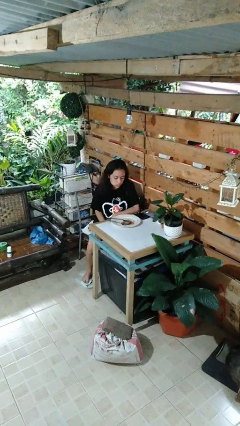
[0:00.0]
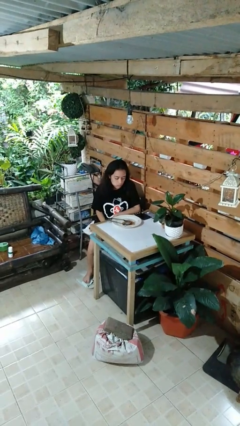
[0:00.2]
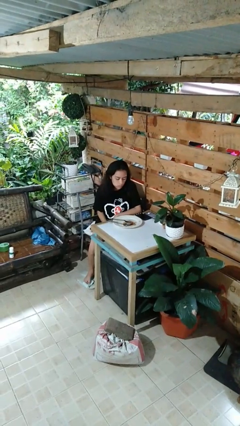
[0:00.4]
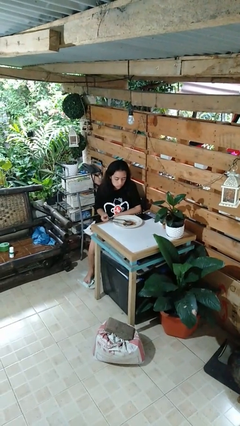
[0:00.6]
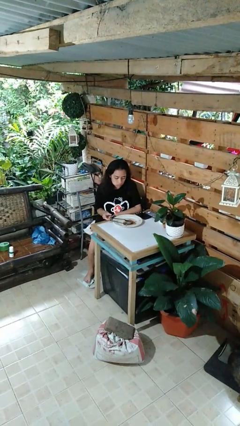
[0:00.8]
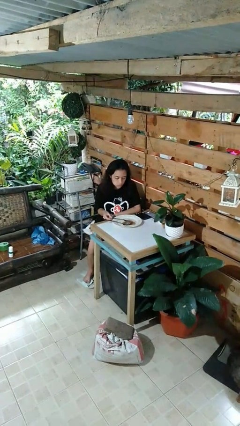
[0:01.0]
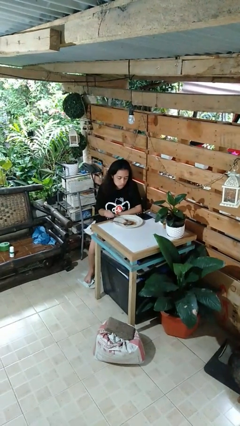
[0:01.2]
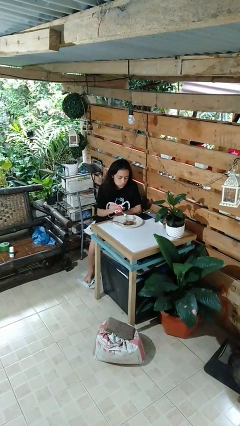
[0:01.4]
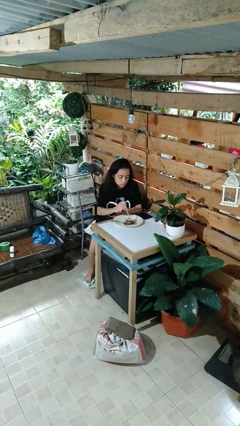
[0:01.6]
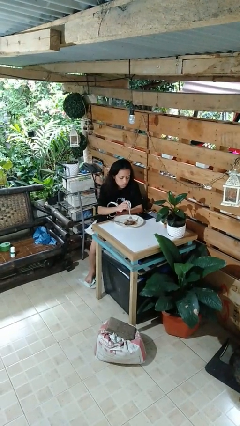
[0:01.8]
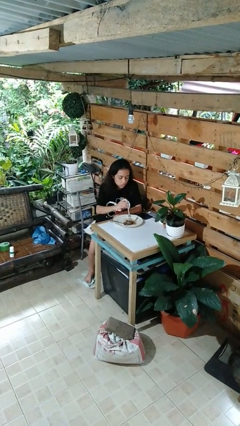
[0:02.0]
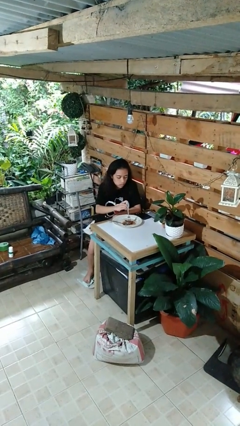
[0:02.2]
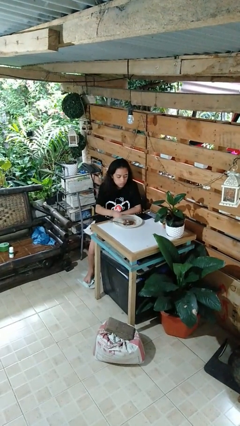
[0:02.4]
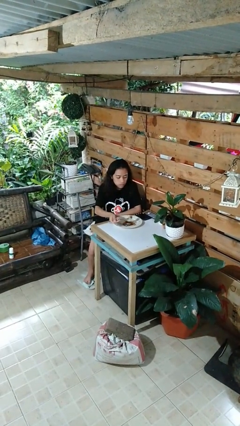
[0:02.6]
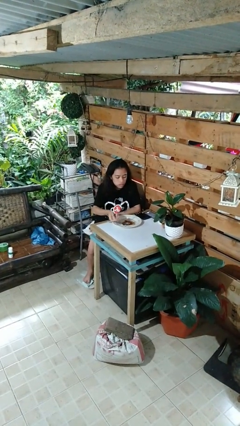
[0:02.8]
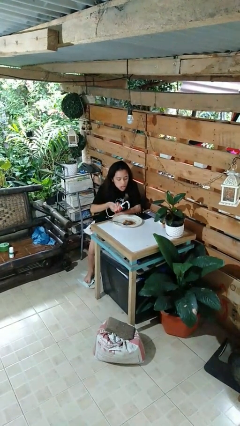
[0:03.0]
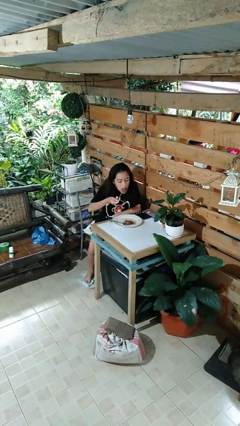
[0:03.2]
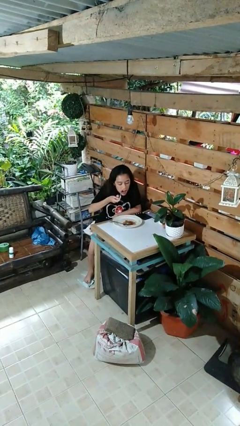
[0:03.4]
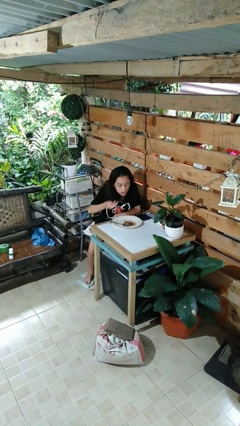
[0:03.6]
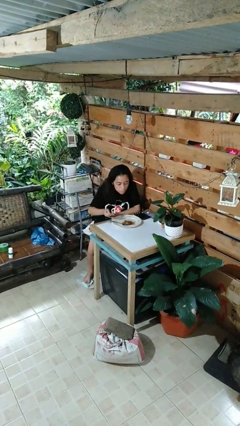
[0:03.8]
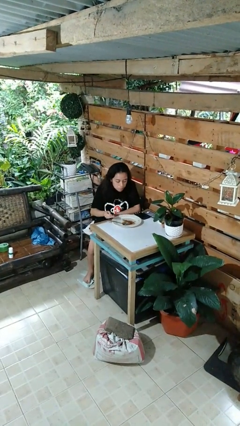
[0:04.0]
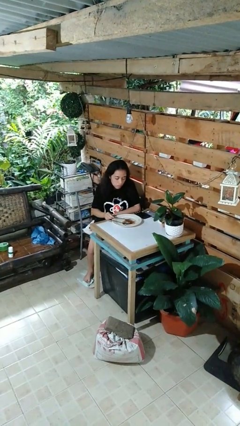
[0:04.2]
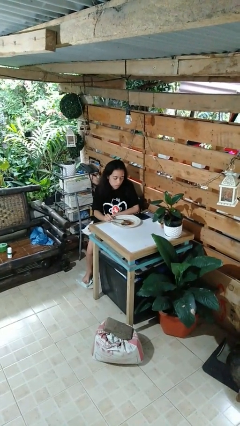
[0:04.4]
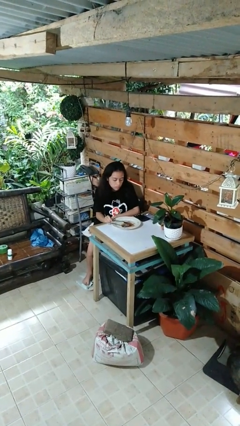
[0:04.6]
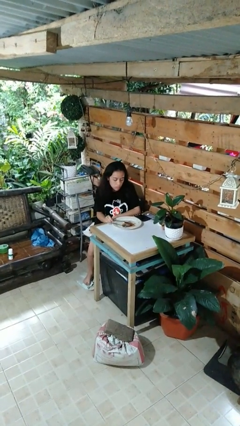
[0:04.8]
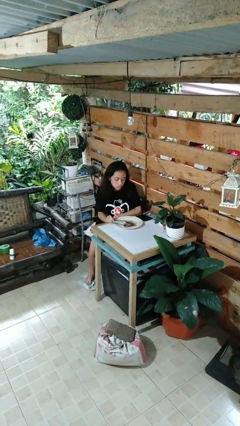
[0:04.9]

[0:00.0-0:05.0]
person eats with utensil

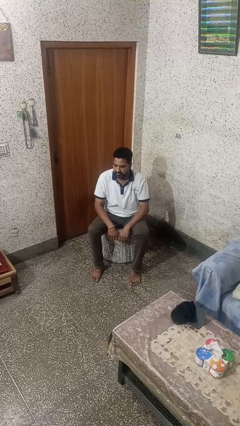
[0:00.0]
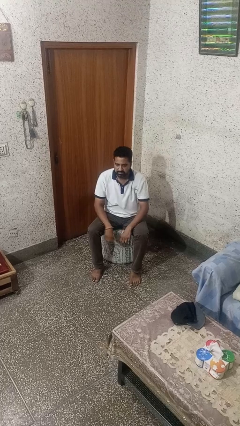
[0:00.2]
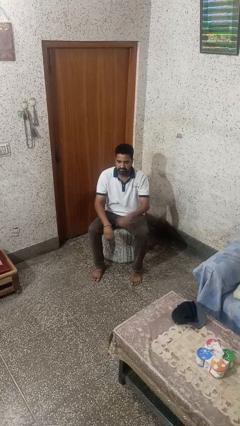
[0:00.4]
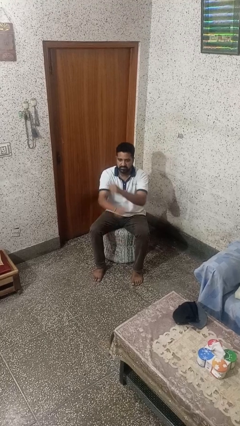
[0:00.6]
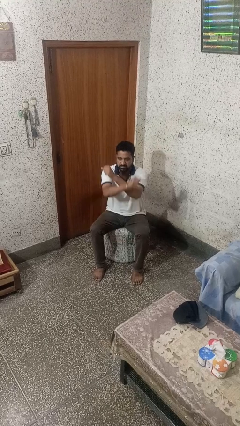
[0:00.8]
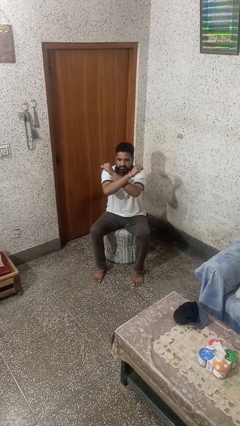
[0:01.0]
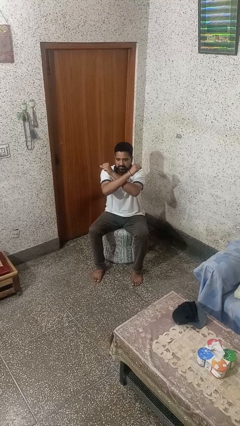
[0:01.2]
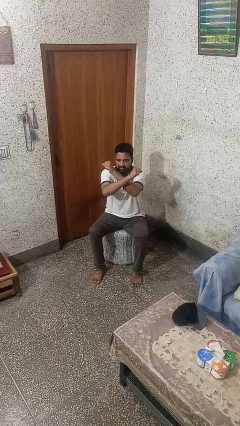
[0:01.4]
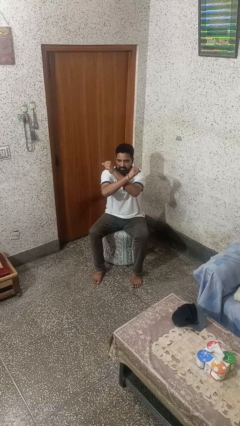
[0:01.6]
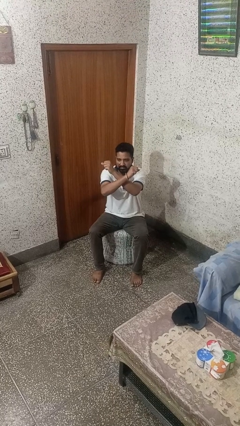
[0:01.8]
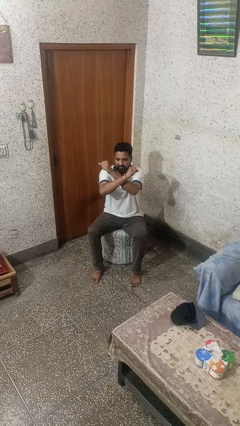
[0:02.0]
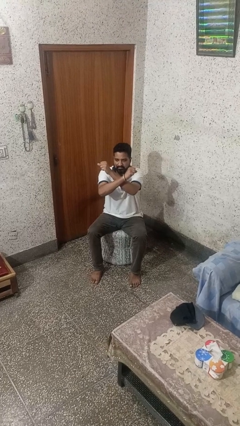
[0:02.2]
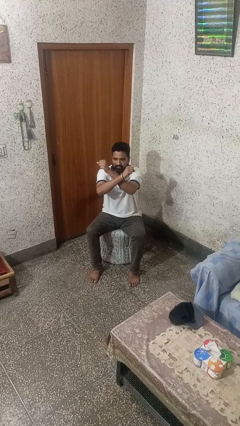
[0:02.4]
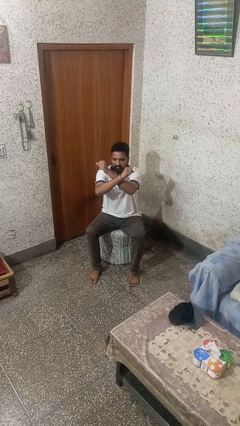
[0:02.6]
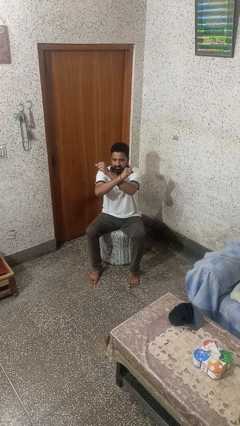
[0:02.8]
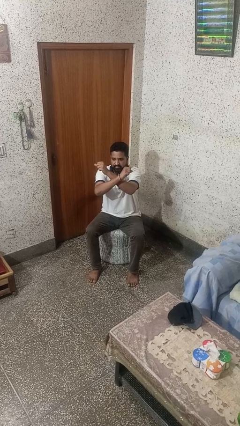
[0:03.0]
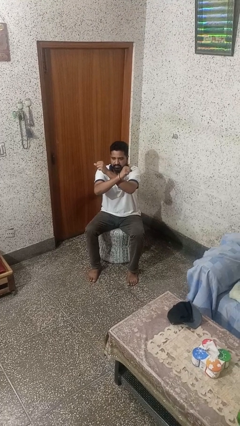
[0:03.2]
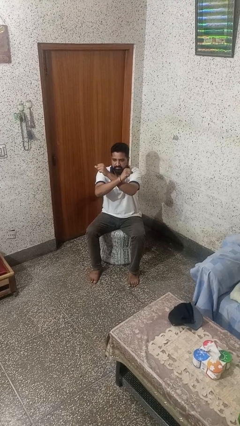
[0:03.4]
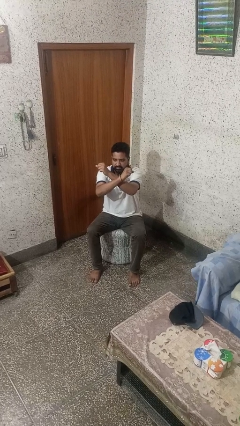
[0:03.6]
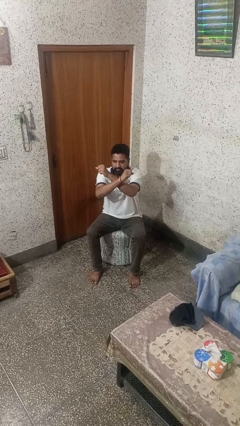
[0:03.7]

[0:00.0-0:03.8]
person gestures arms x

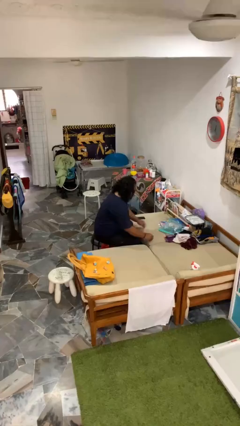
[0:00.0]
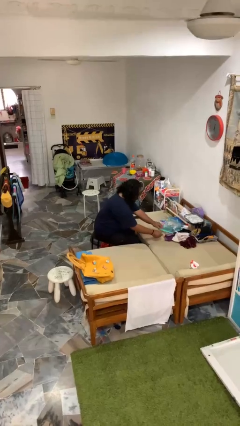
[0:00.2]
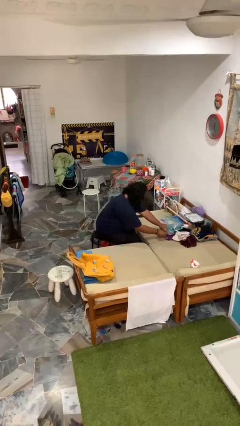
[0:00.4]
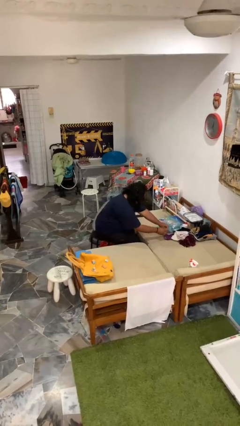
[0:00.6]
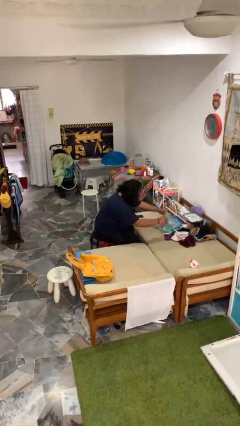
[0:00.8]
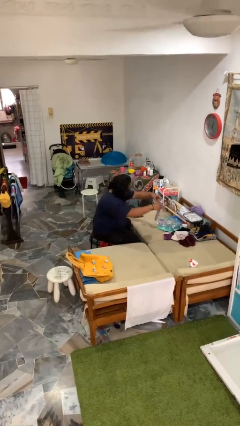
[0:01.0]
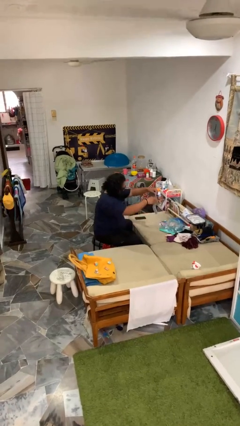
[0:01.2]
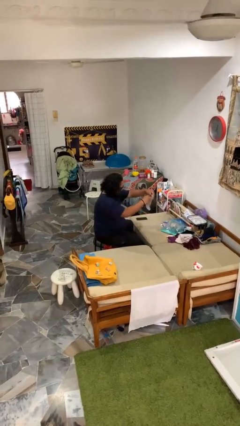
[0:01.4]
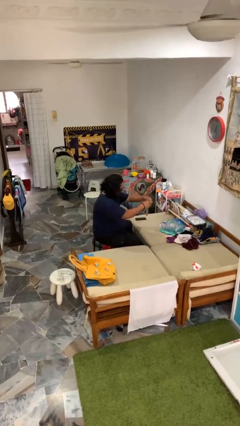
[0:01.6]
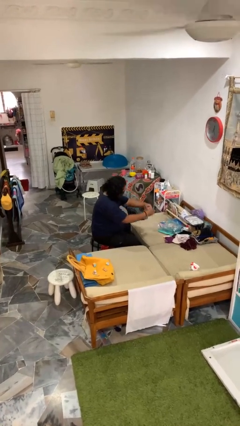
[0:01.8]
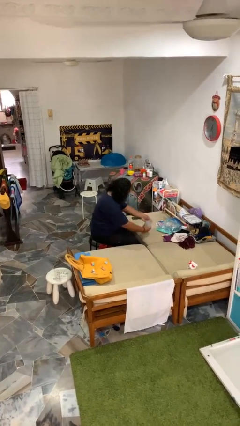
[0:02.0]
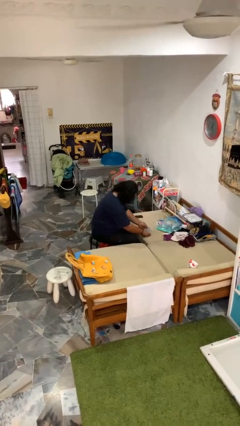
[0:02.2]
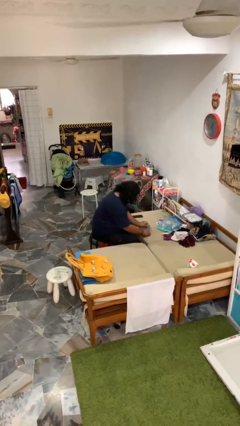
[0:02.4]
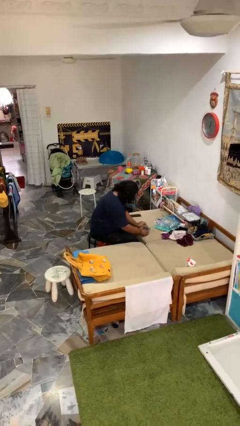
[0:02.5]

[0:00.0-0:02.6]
person folds socks

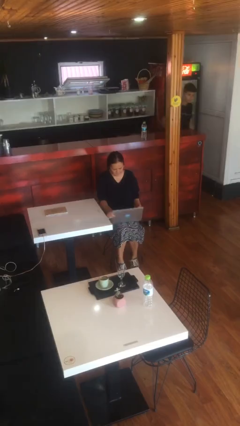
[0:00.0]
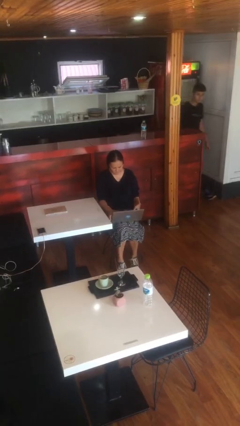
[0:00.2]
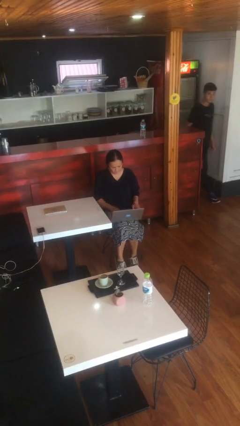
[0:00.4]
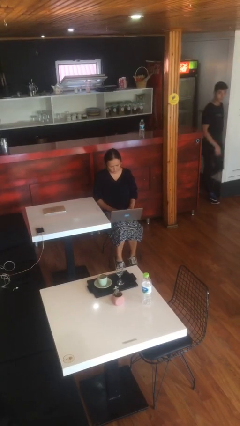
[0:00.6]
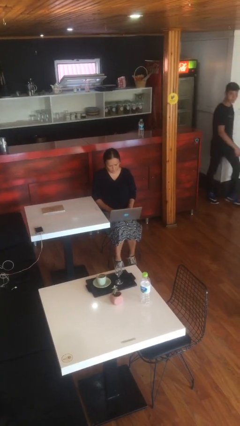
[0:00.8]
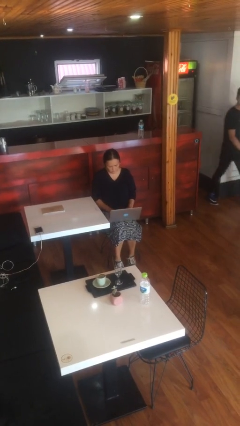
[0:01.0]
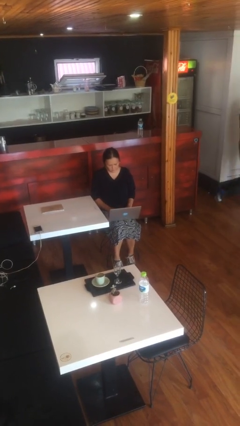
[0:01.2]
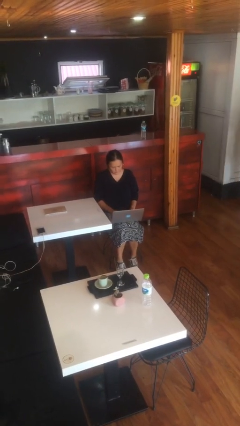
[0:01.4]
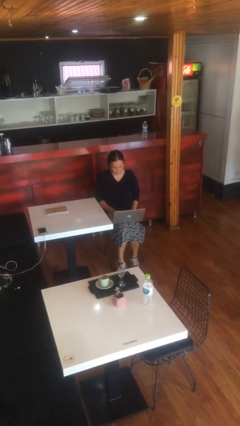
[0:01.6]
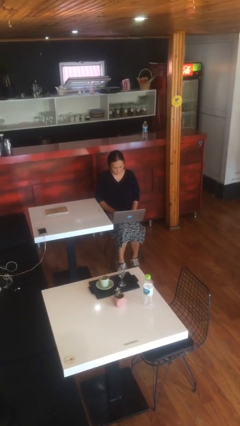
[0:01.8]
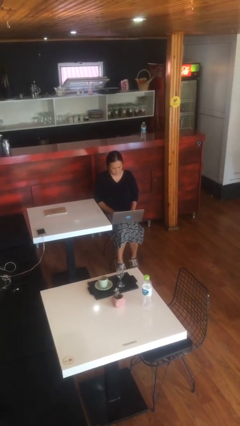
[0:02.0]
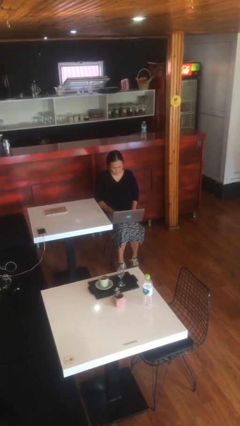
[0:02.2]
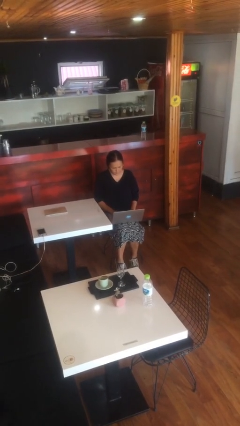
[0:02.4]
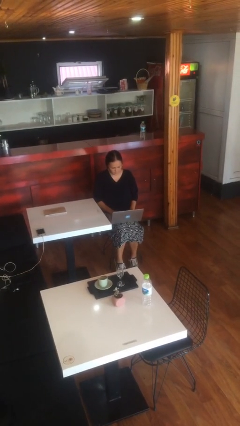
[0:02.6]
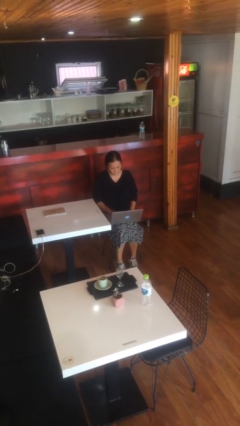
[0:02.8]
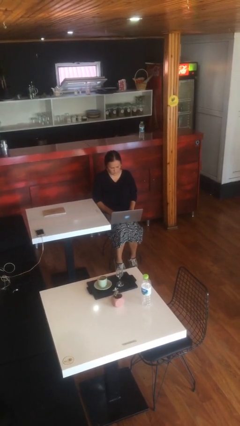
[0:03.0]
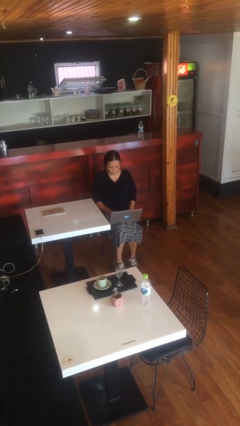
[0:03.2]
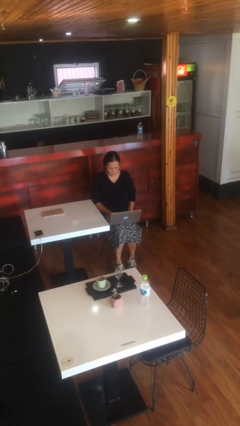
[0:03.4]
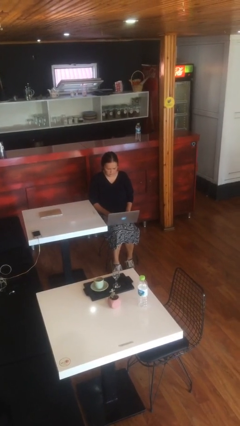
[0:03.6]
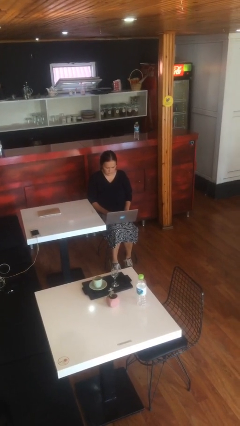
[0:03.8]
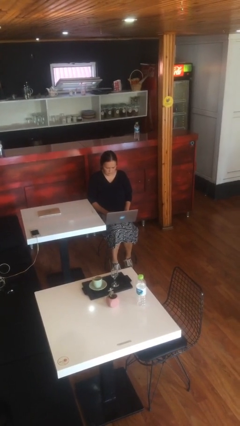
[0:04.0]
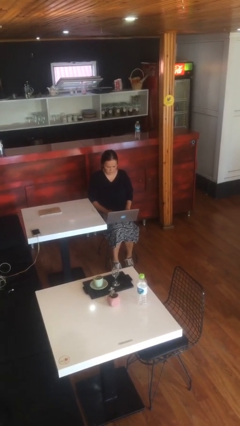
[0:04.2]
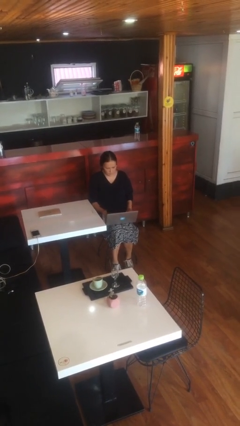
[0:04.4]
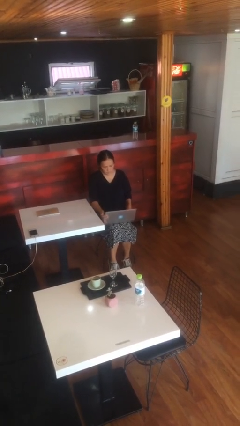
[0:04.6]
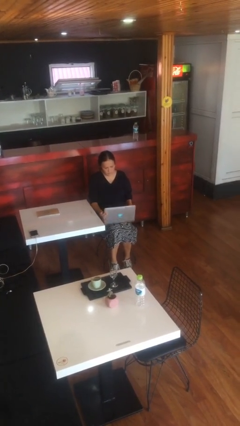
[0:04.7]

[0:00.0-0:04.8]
person interacts with laptop

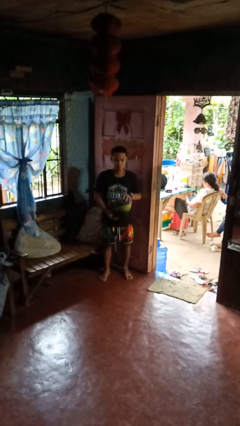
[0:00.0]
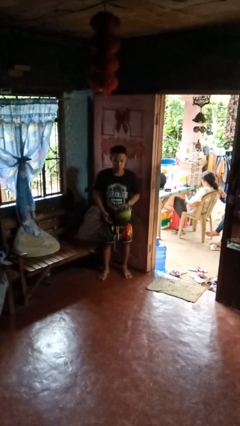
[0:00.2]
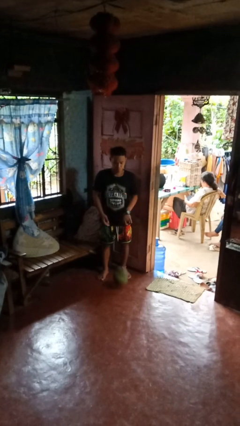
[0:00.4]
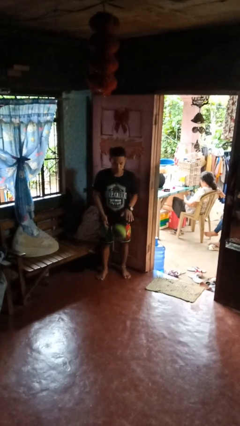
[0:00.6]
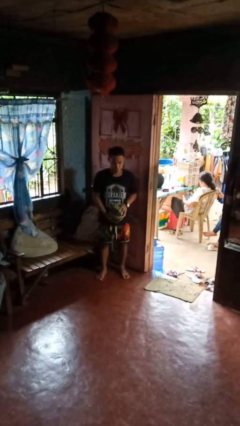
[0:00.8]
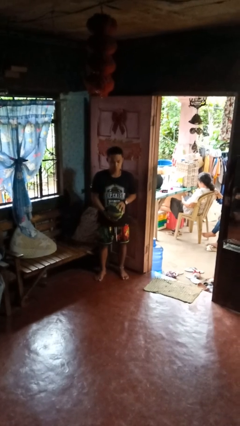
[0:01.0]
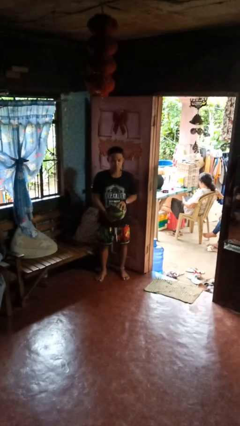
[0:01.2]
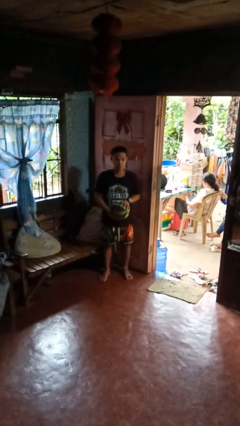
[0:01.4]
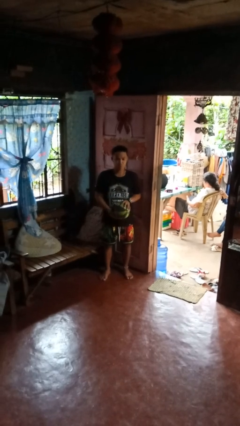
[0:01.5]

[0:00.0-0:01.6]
person bounces ball on floor
